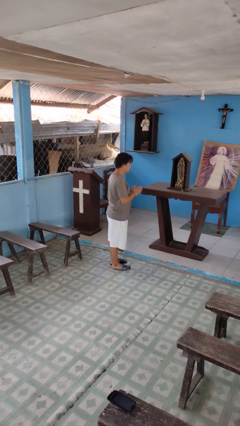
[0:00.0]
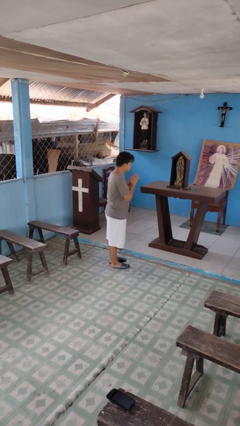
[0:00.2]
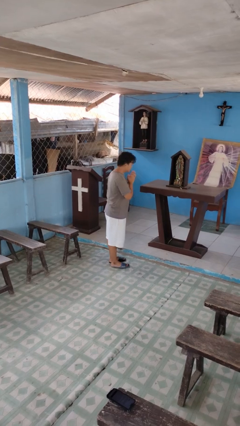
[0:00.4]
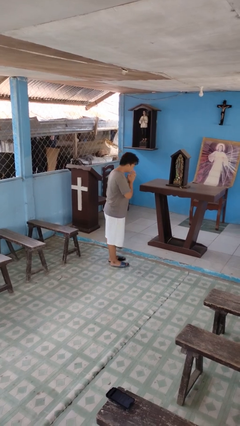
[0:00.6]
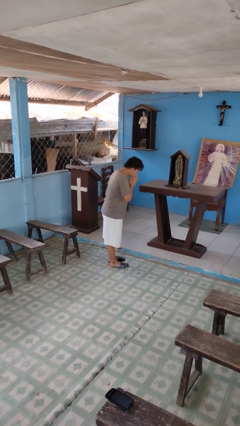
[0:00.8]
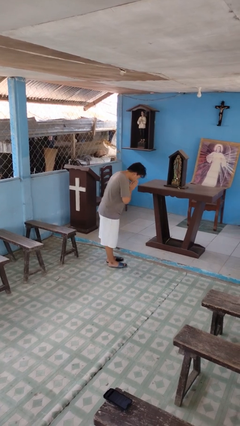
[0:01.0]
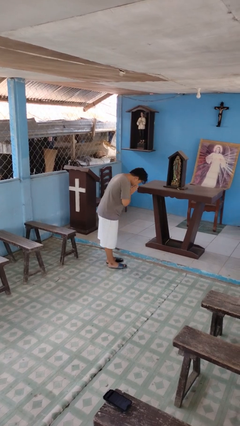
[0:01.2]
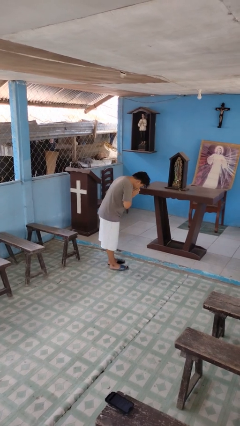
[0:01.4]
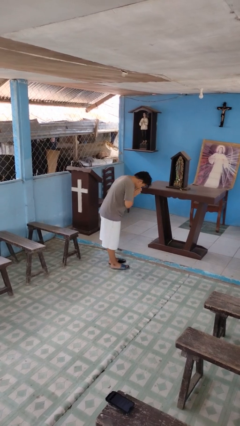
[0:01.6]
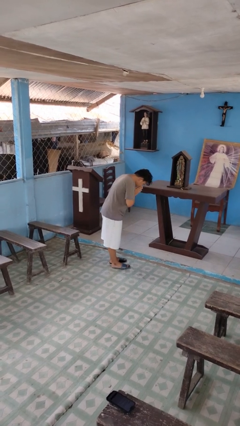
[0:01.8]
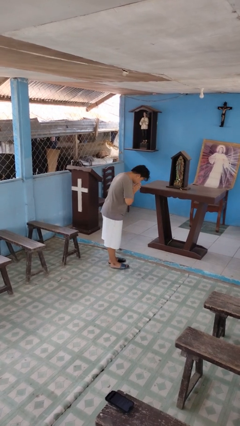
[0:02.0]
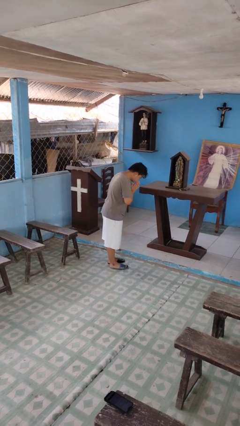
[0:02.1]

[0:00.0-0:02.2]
person prays

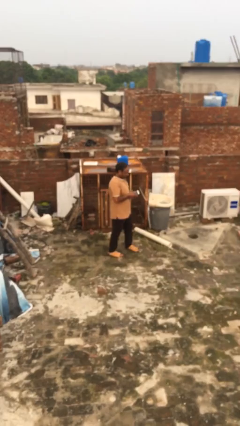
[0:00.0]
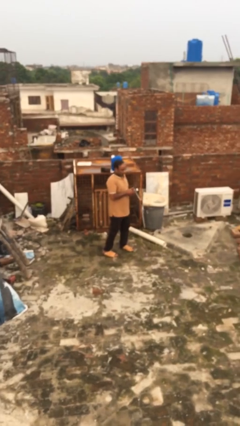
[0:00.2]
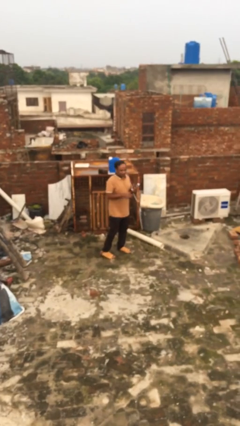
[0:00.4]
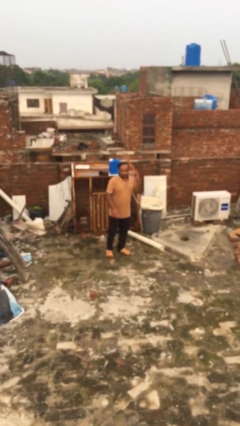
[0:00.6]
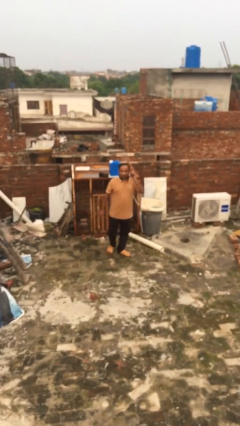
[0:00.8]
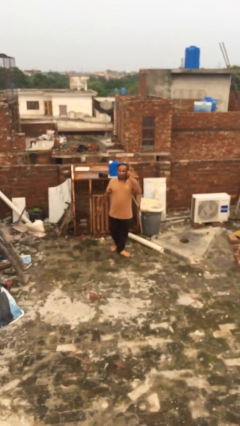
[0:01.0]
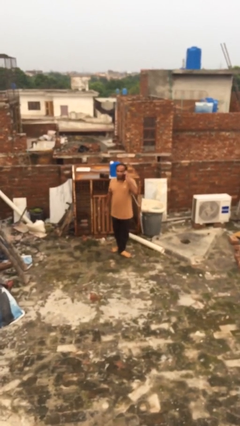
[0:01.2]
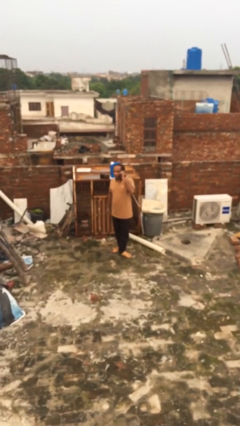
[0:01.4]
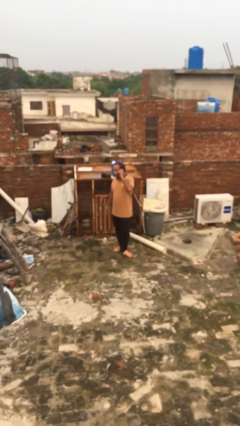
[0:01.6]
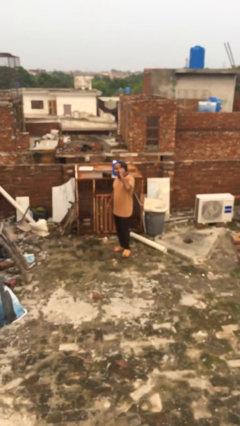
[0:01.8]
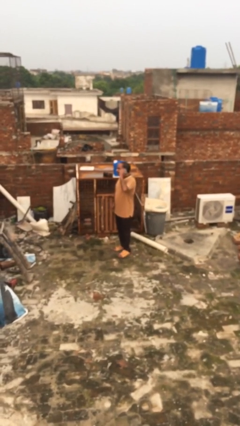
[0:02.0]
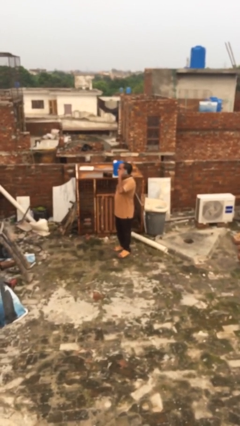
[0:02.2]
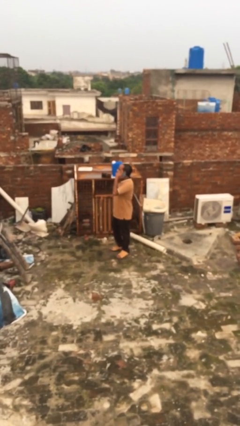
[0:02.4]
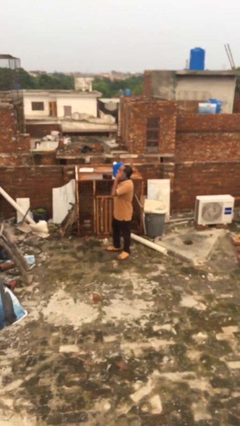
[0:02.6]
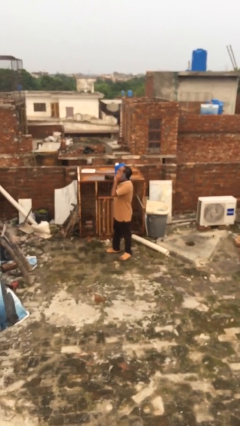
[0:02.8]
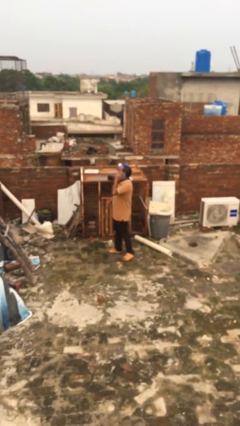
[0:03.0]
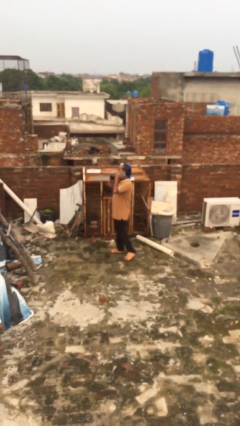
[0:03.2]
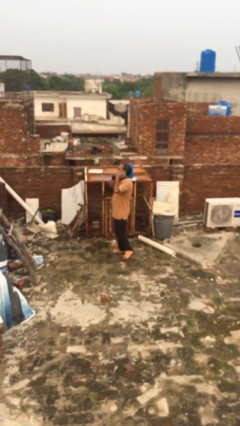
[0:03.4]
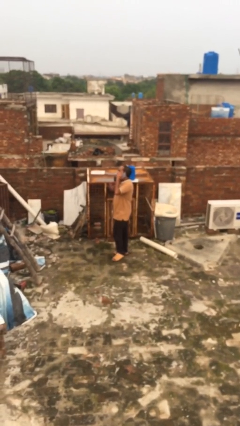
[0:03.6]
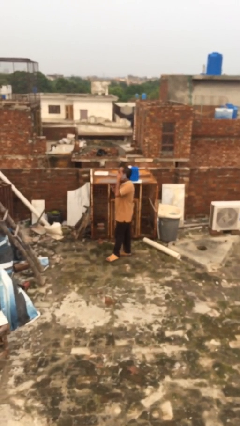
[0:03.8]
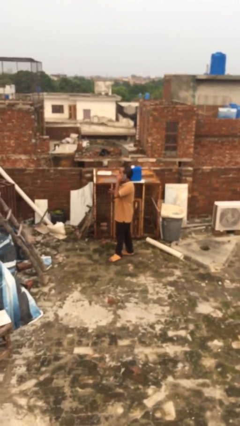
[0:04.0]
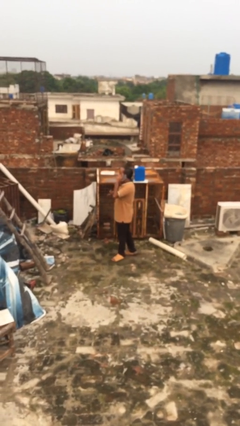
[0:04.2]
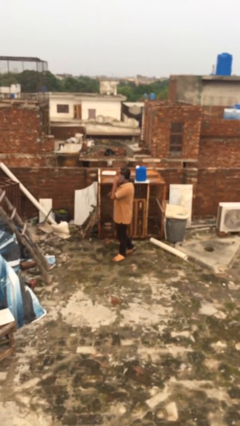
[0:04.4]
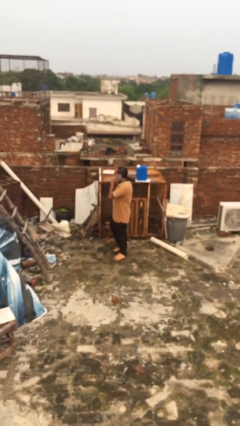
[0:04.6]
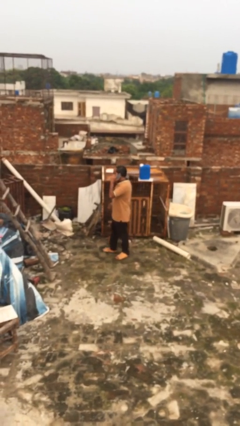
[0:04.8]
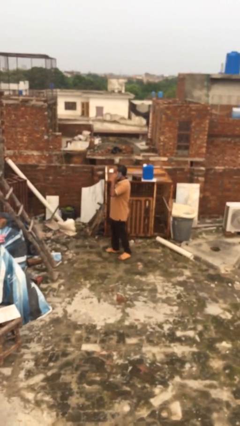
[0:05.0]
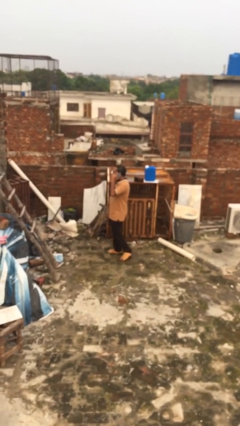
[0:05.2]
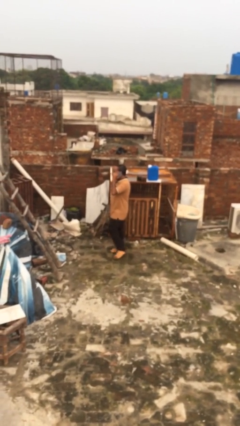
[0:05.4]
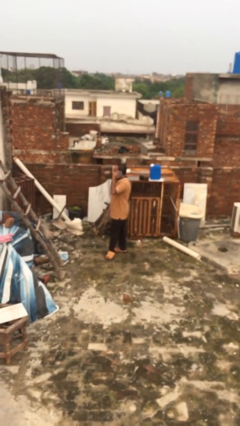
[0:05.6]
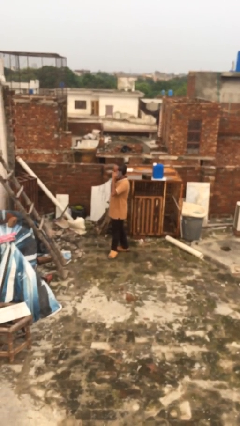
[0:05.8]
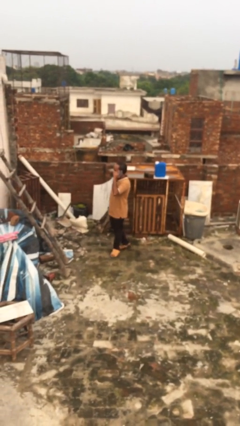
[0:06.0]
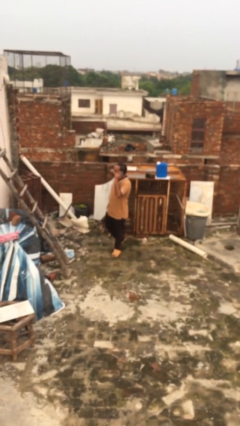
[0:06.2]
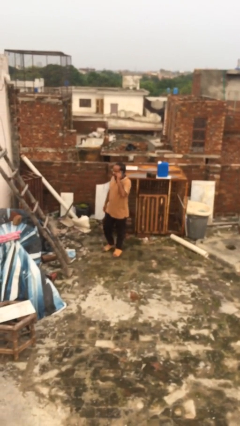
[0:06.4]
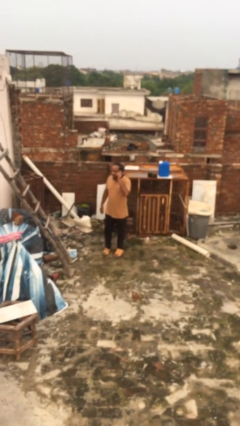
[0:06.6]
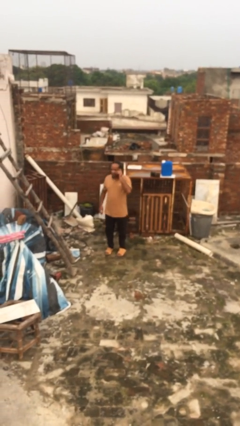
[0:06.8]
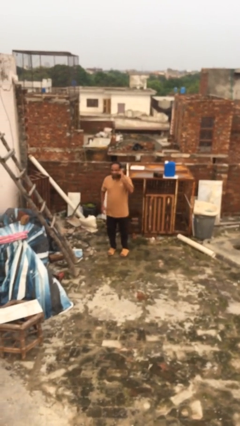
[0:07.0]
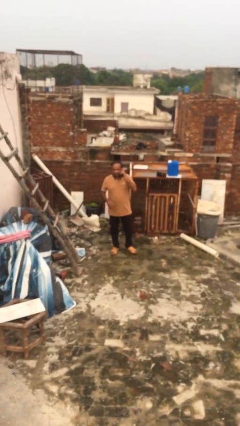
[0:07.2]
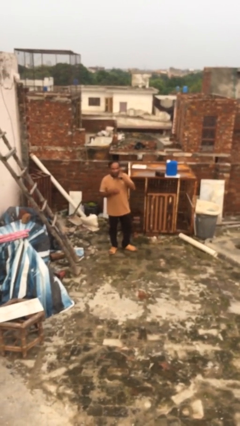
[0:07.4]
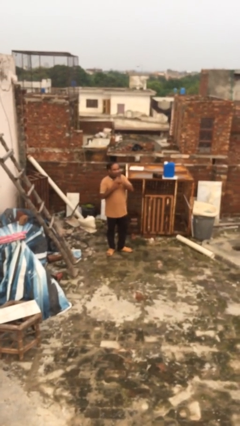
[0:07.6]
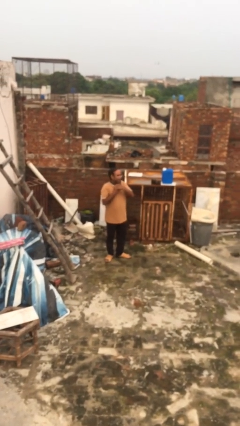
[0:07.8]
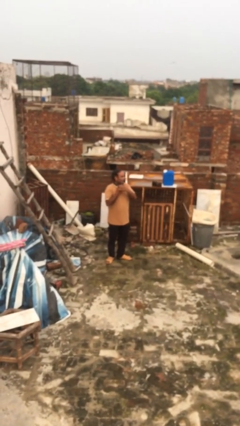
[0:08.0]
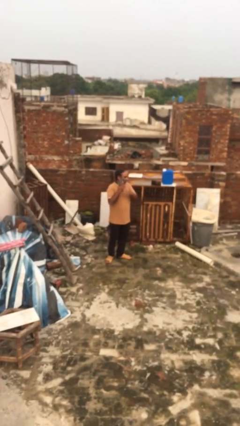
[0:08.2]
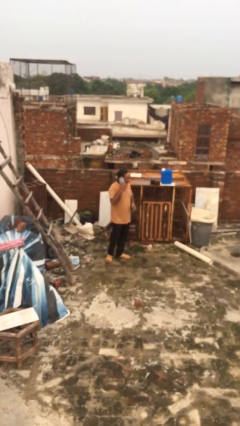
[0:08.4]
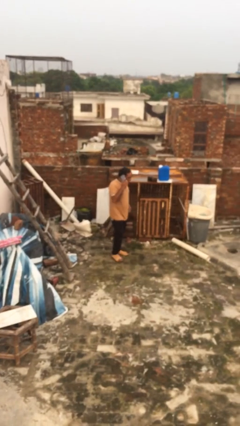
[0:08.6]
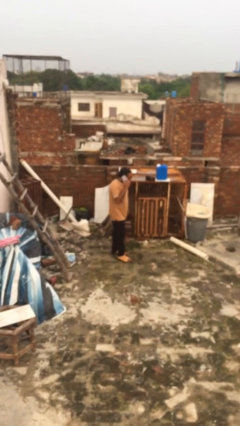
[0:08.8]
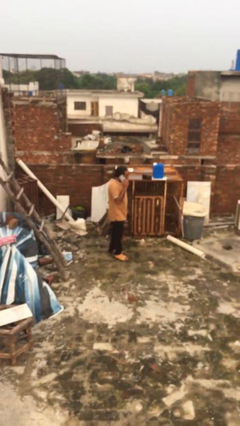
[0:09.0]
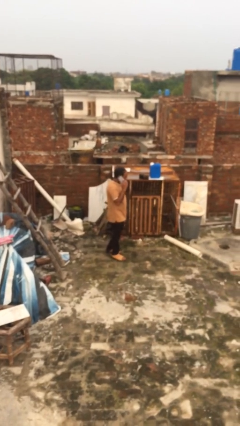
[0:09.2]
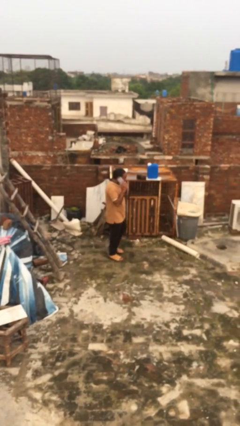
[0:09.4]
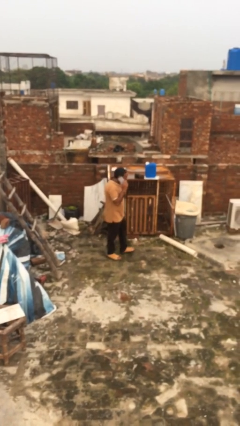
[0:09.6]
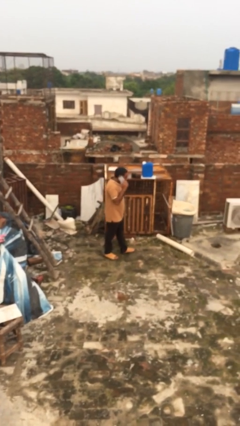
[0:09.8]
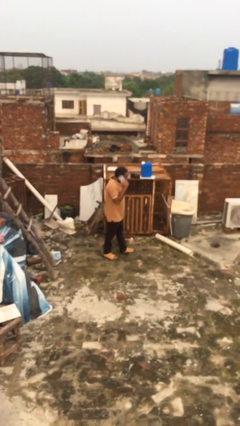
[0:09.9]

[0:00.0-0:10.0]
person talks on phone

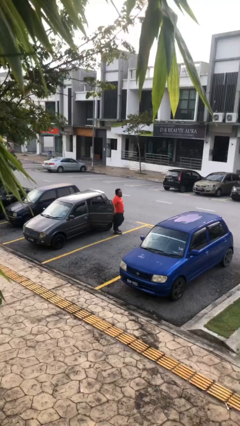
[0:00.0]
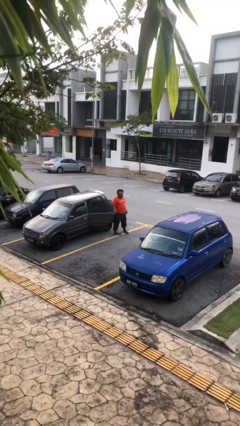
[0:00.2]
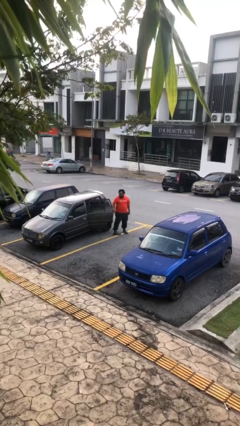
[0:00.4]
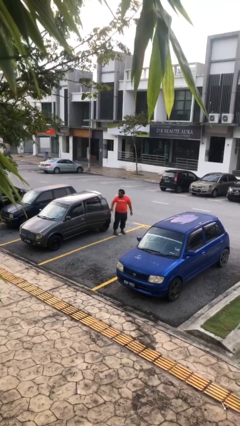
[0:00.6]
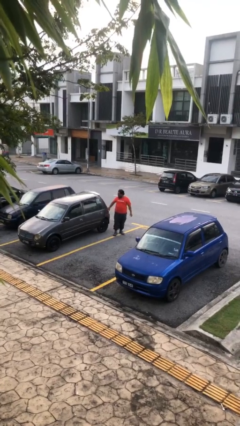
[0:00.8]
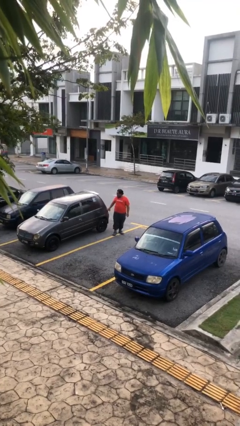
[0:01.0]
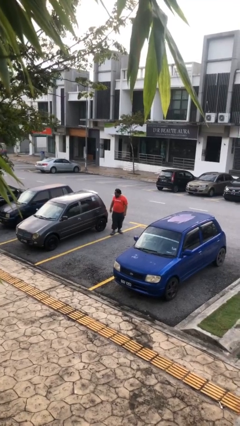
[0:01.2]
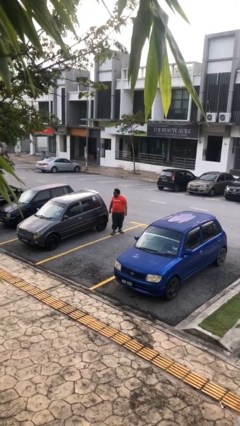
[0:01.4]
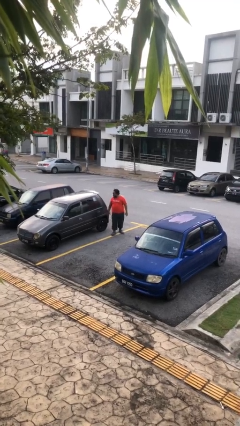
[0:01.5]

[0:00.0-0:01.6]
person closes car door

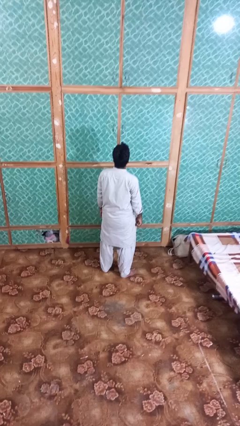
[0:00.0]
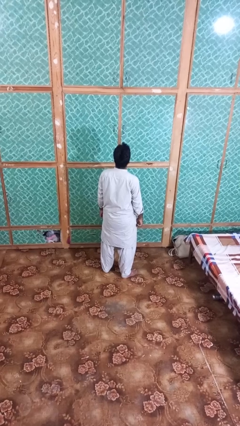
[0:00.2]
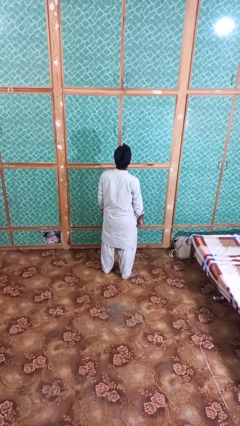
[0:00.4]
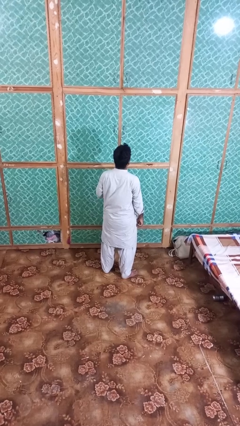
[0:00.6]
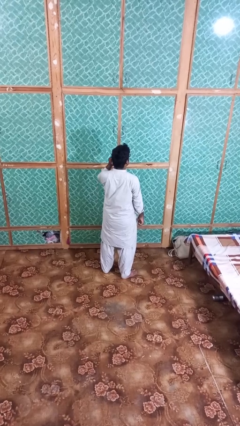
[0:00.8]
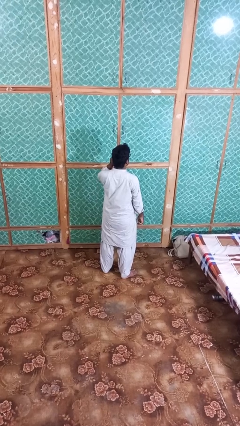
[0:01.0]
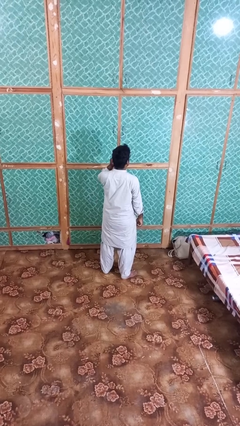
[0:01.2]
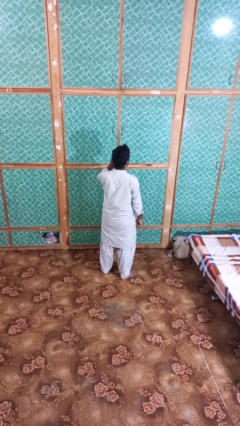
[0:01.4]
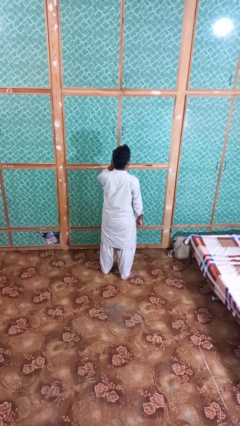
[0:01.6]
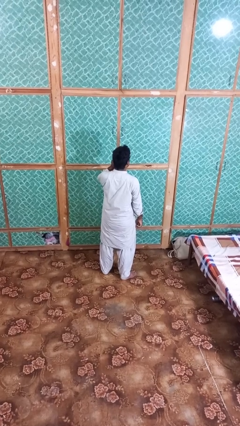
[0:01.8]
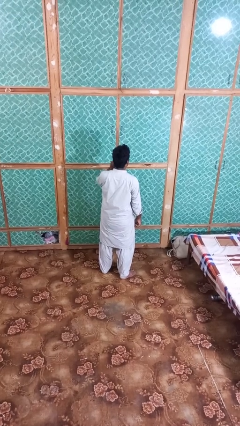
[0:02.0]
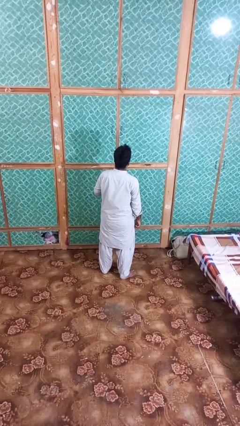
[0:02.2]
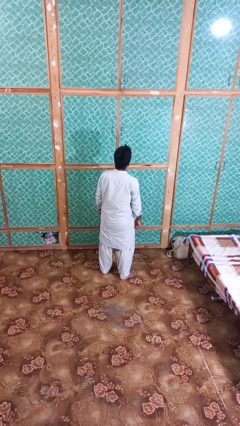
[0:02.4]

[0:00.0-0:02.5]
person touches earlobe

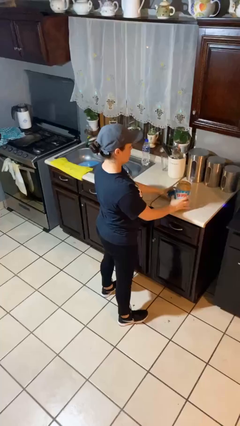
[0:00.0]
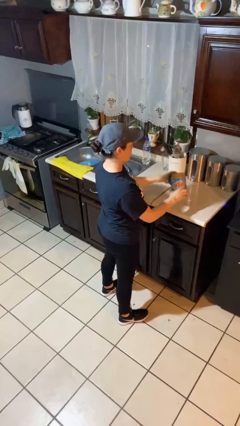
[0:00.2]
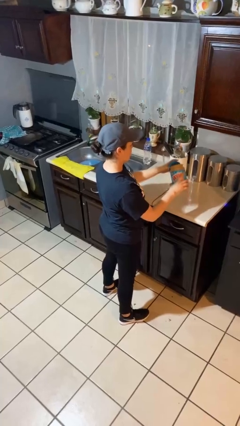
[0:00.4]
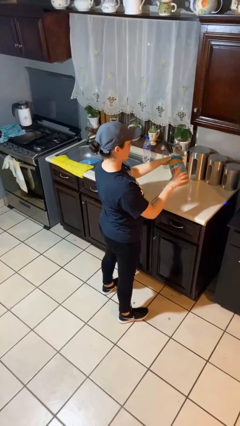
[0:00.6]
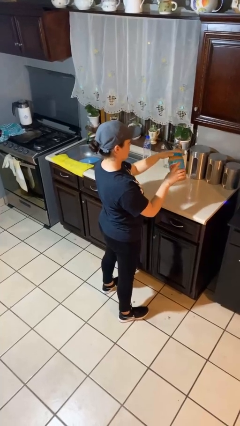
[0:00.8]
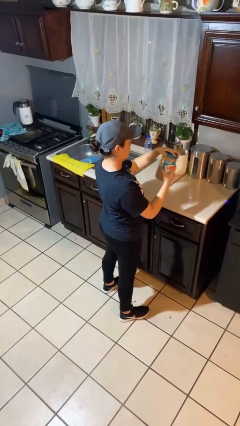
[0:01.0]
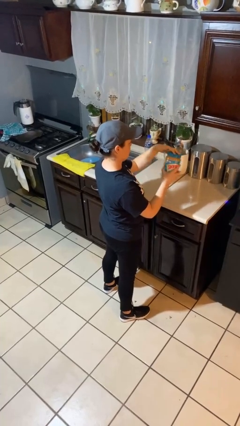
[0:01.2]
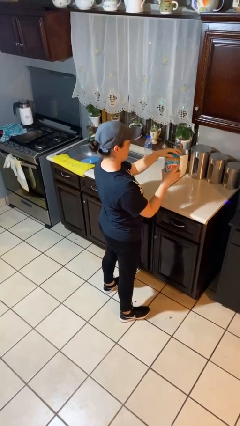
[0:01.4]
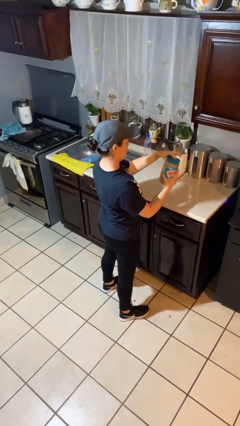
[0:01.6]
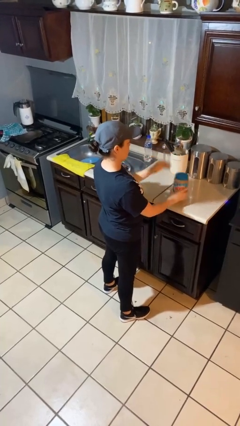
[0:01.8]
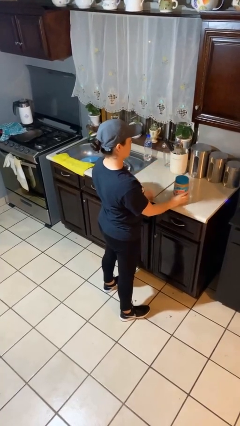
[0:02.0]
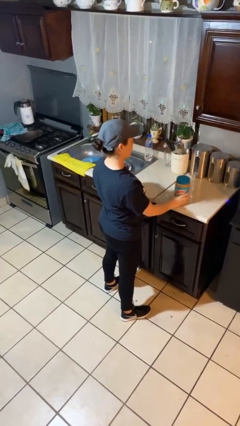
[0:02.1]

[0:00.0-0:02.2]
person closes jar
